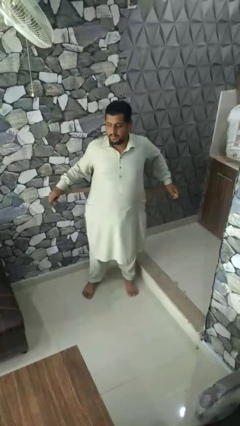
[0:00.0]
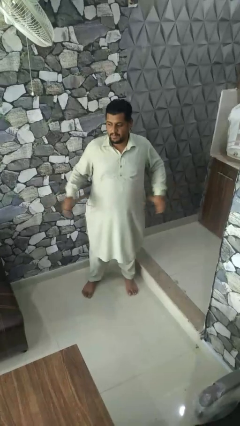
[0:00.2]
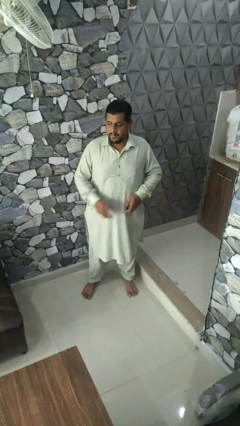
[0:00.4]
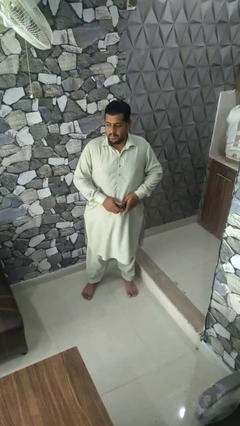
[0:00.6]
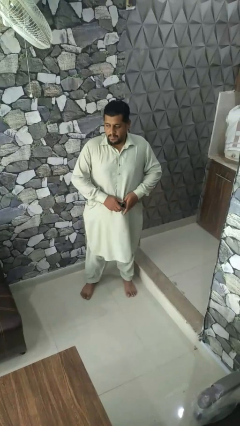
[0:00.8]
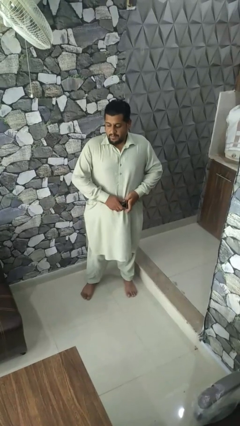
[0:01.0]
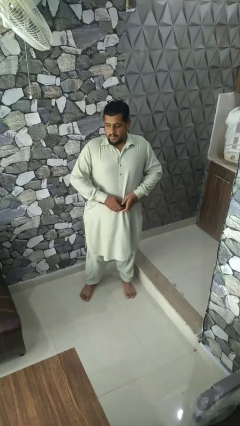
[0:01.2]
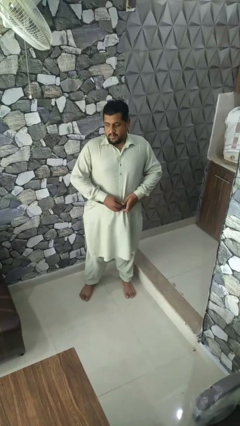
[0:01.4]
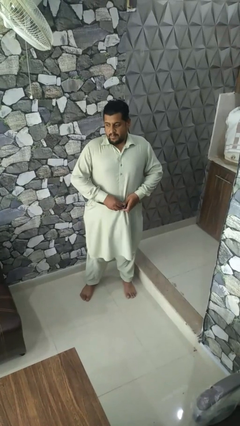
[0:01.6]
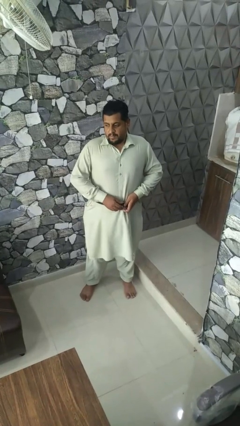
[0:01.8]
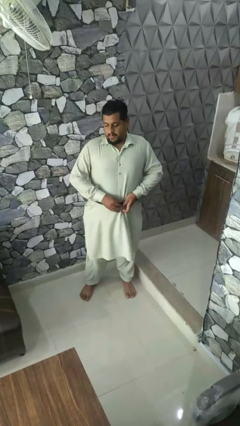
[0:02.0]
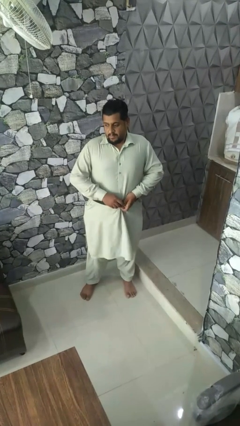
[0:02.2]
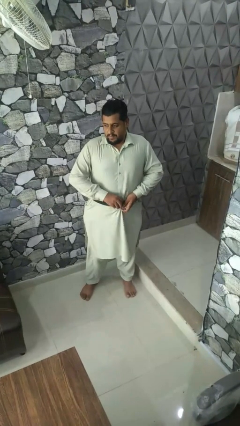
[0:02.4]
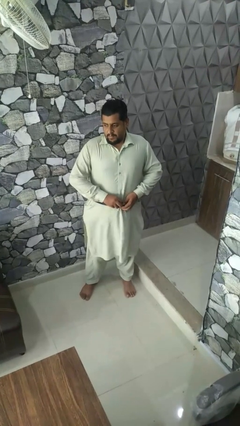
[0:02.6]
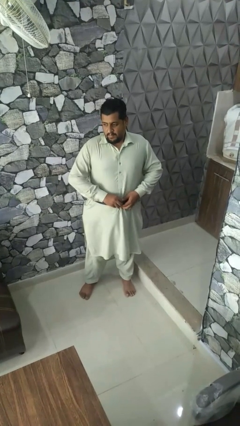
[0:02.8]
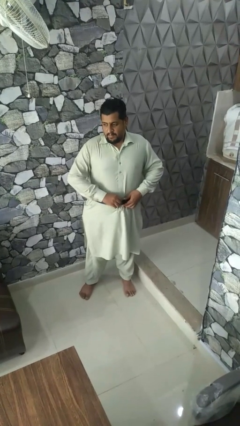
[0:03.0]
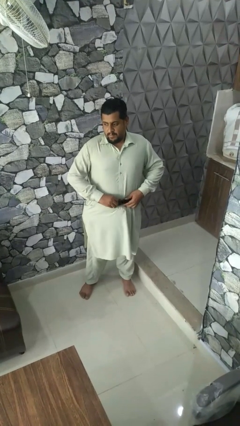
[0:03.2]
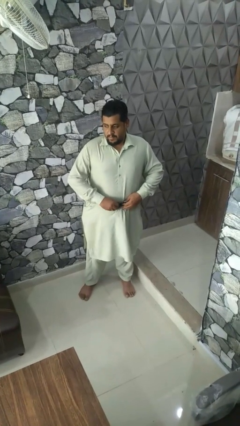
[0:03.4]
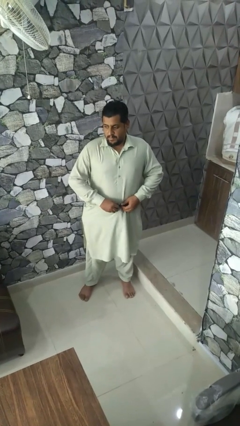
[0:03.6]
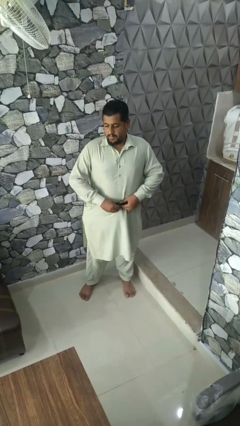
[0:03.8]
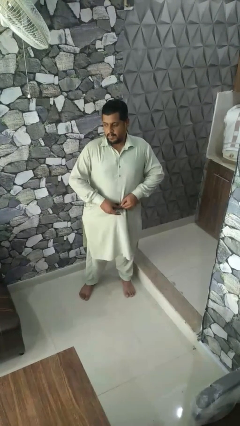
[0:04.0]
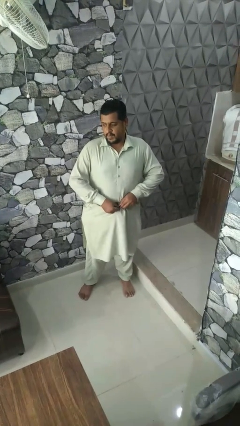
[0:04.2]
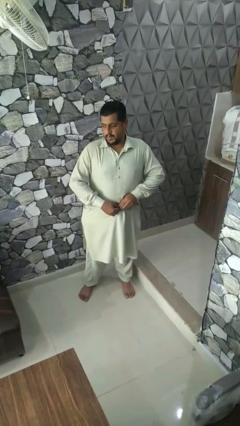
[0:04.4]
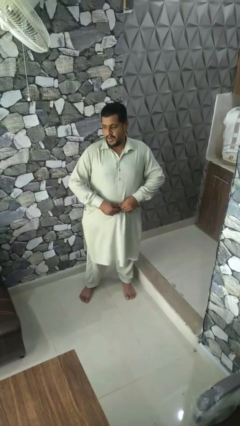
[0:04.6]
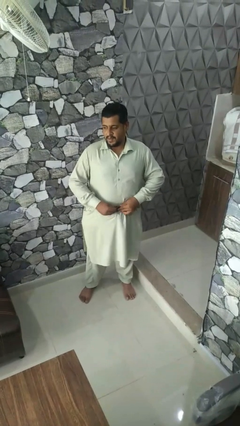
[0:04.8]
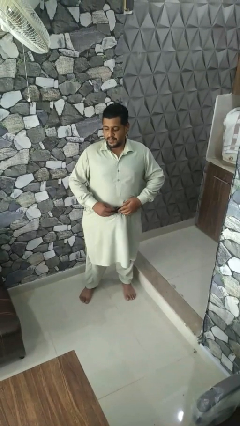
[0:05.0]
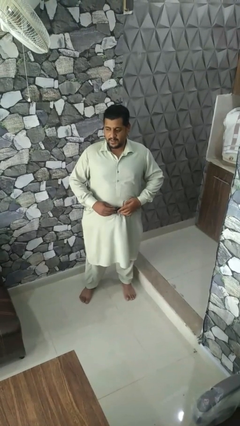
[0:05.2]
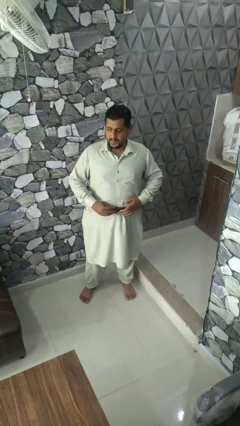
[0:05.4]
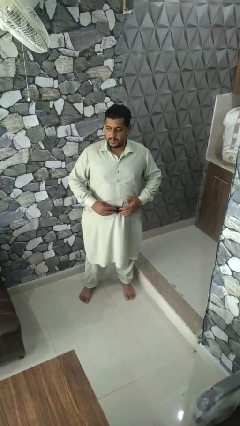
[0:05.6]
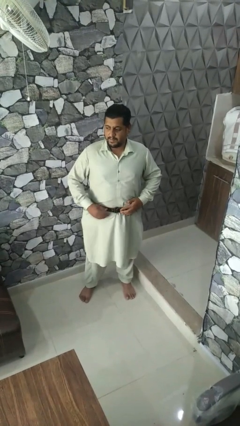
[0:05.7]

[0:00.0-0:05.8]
person puts on belt

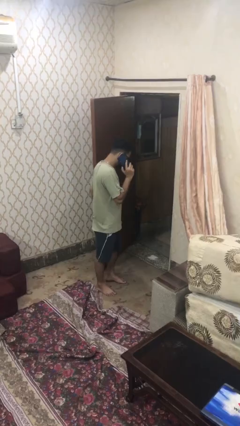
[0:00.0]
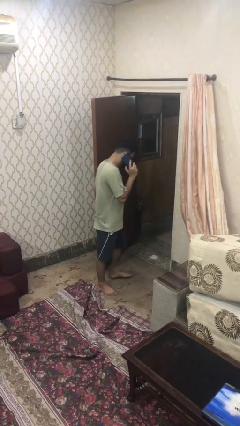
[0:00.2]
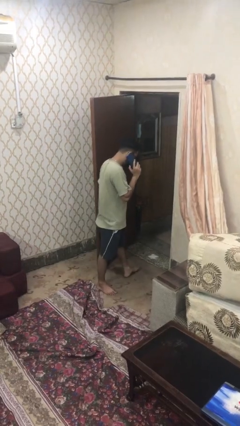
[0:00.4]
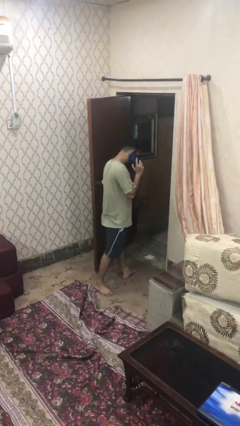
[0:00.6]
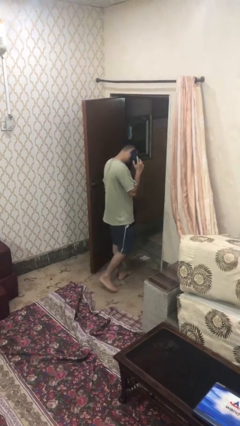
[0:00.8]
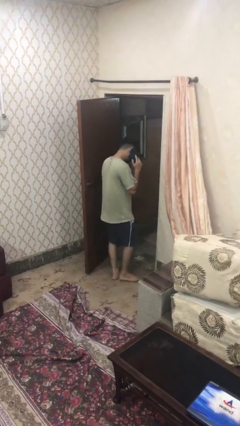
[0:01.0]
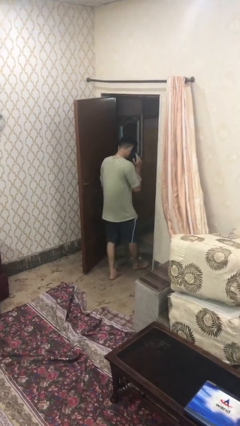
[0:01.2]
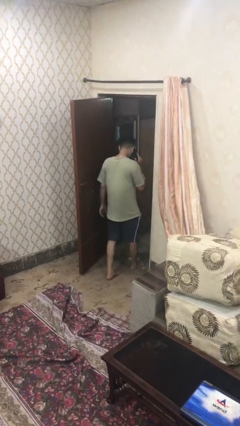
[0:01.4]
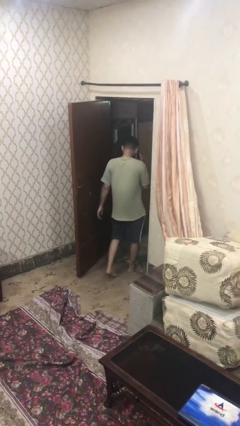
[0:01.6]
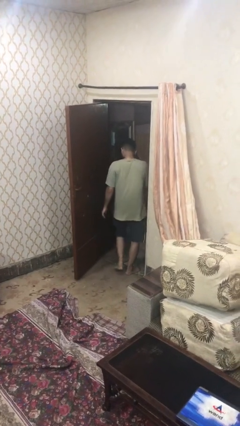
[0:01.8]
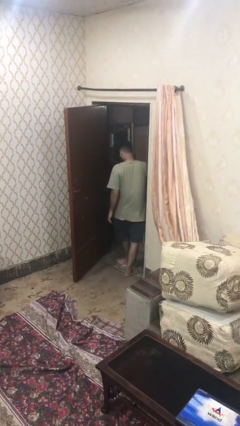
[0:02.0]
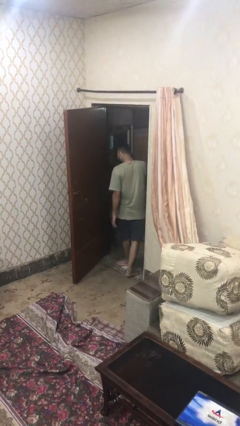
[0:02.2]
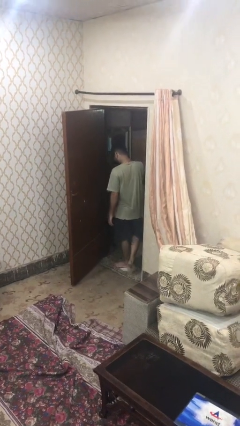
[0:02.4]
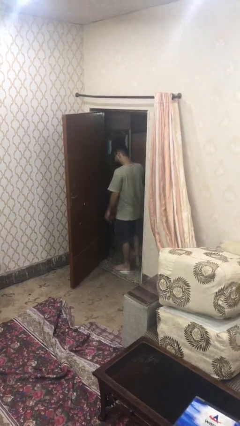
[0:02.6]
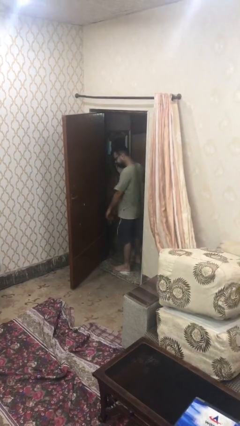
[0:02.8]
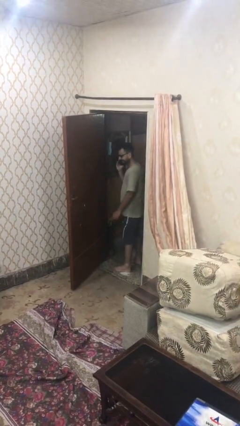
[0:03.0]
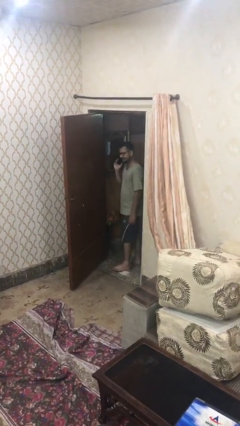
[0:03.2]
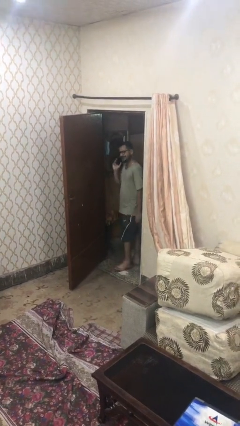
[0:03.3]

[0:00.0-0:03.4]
person exits scene through structure

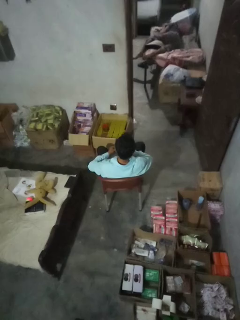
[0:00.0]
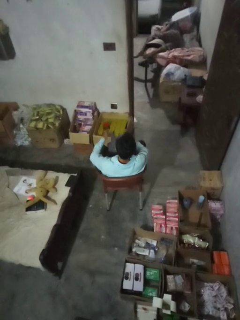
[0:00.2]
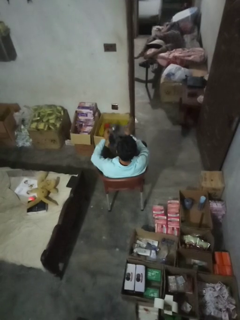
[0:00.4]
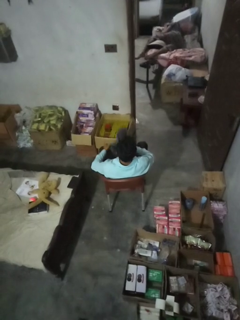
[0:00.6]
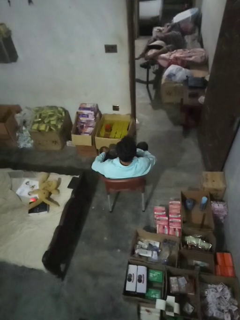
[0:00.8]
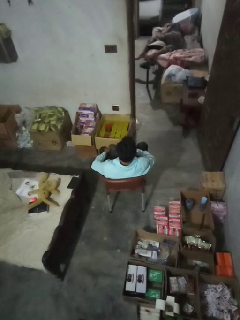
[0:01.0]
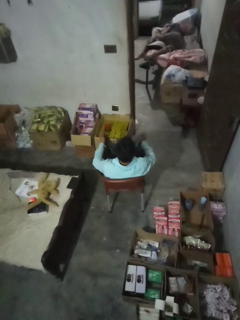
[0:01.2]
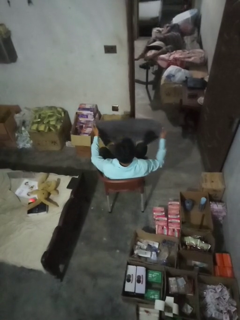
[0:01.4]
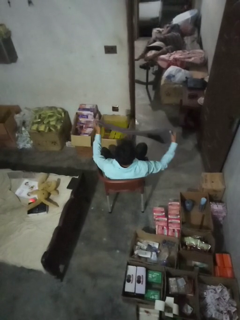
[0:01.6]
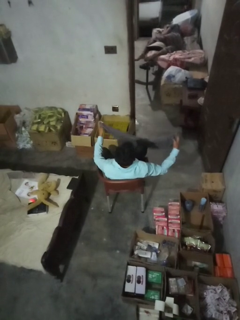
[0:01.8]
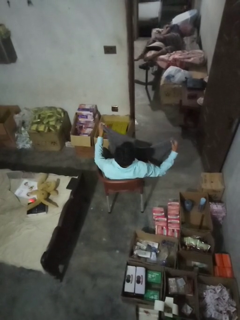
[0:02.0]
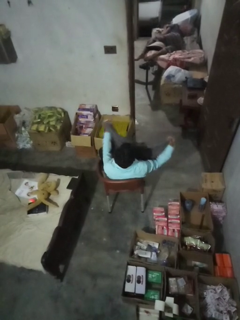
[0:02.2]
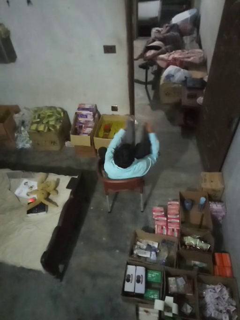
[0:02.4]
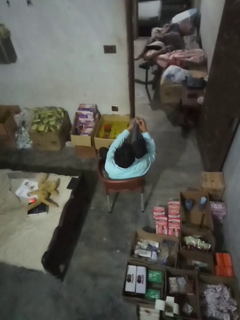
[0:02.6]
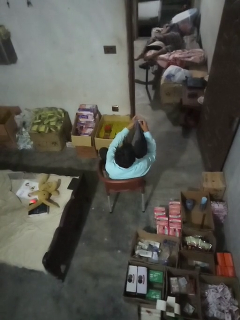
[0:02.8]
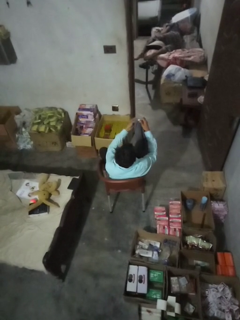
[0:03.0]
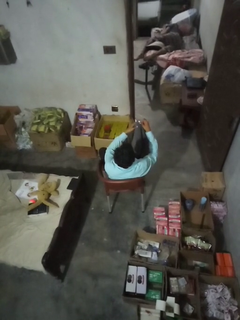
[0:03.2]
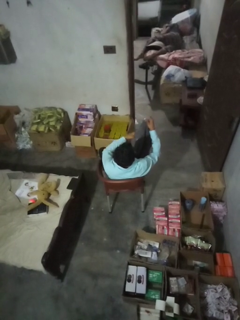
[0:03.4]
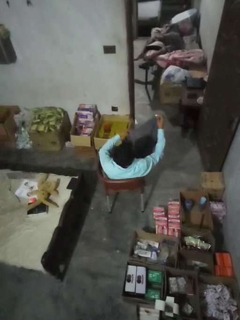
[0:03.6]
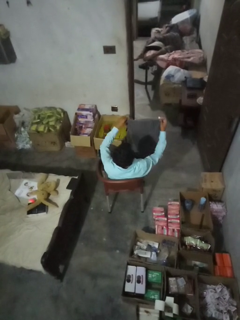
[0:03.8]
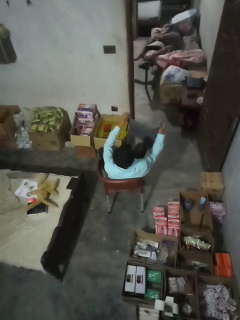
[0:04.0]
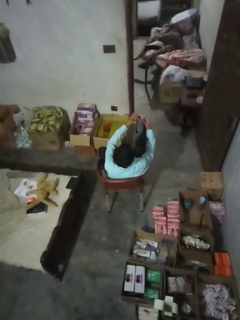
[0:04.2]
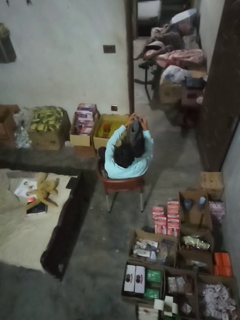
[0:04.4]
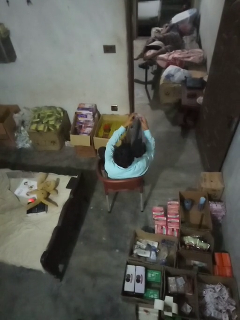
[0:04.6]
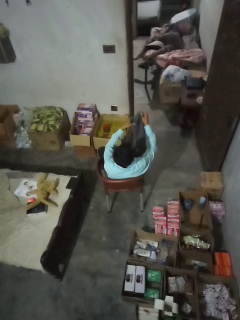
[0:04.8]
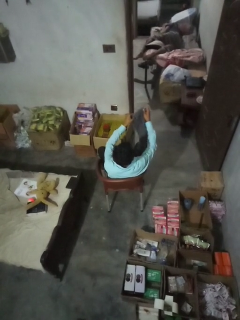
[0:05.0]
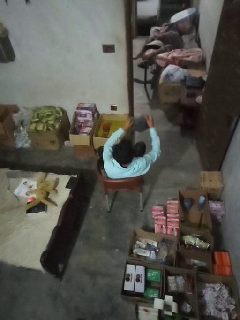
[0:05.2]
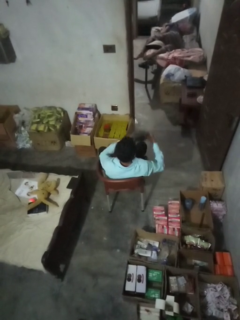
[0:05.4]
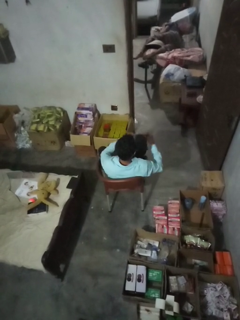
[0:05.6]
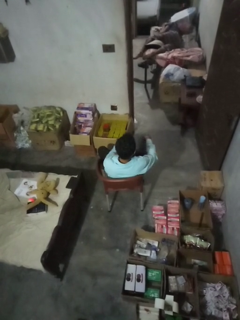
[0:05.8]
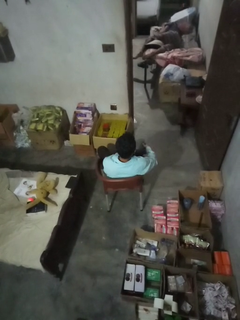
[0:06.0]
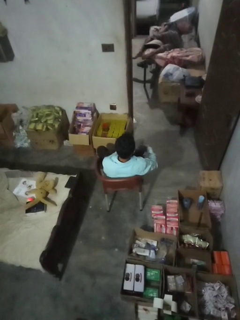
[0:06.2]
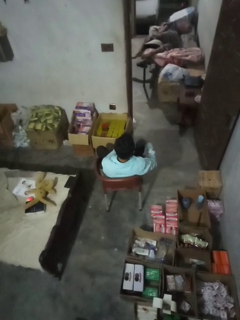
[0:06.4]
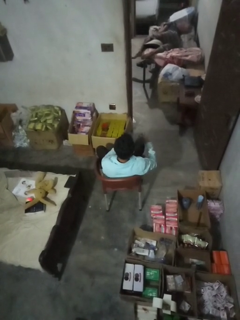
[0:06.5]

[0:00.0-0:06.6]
person folds towel

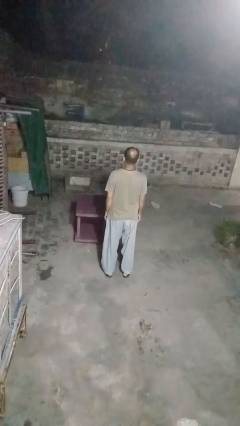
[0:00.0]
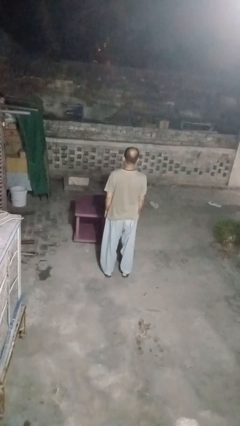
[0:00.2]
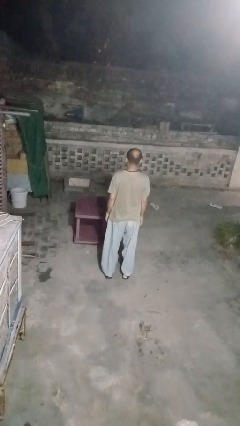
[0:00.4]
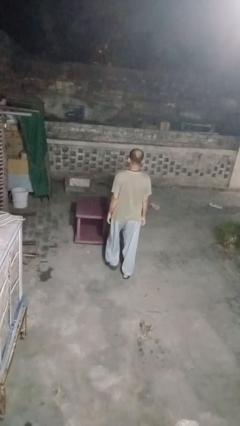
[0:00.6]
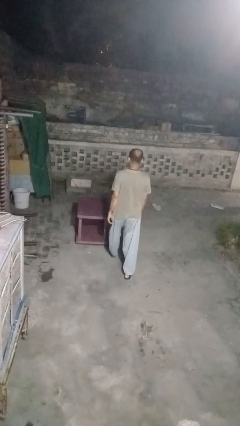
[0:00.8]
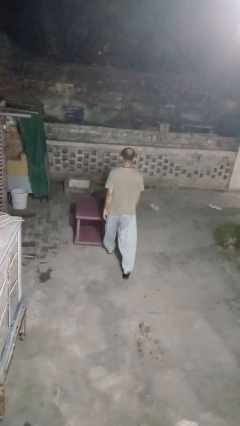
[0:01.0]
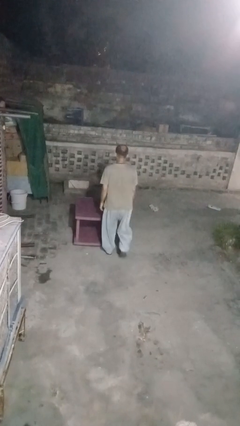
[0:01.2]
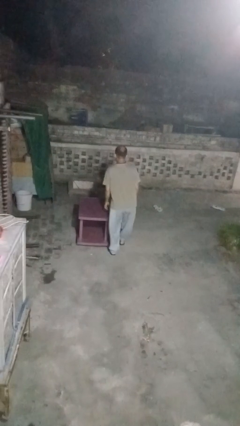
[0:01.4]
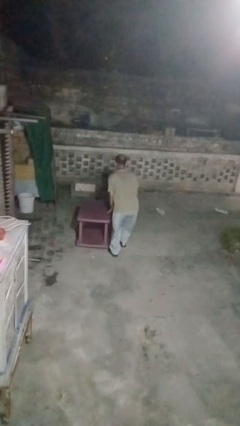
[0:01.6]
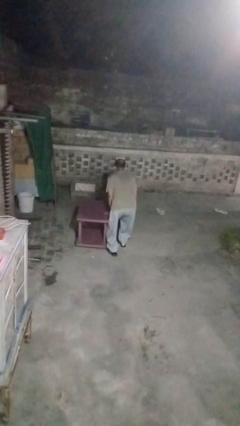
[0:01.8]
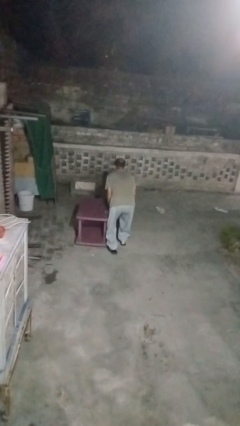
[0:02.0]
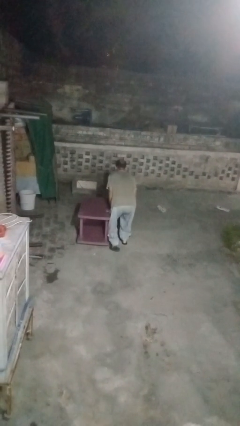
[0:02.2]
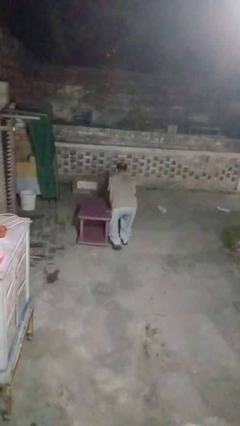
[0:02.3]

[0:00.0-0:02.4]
person bumps into table

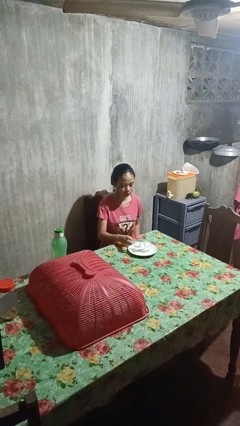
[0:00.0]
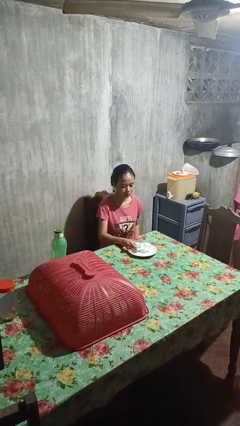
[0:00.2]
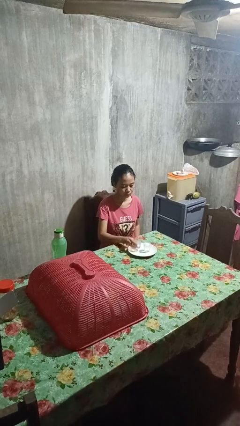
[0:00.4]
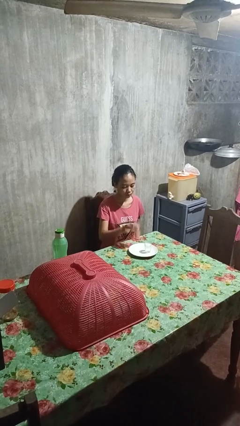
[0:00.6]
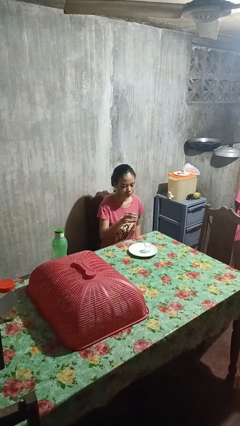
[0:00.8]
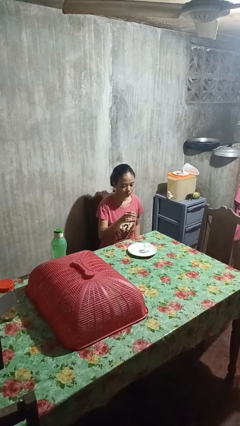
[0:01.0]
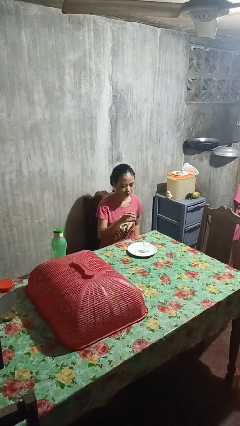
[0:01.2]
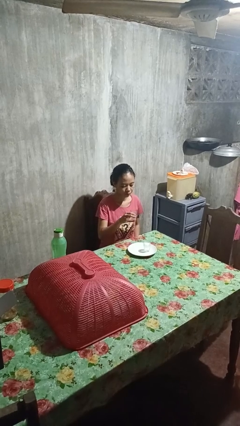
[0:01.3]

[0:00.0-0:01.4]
person picks up object from table
